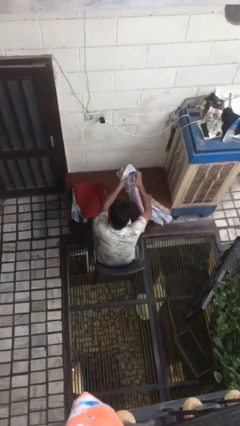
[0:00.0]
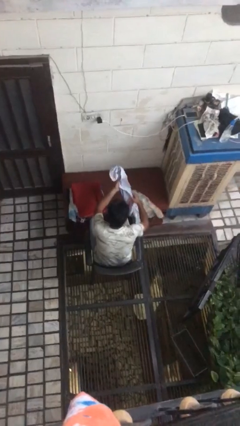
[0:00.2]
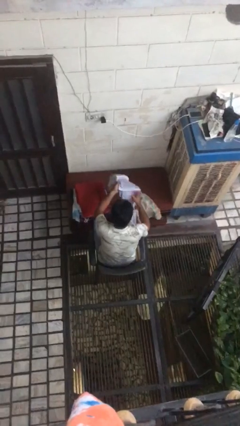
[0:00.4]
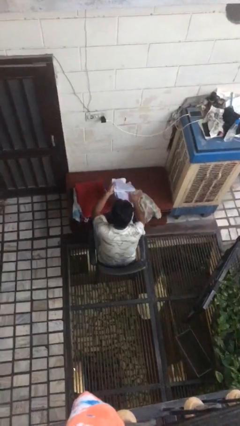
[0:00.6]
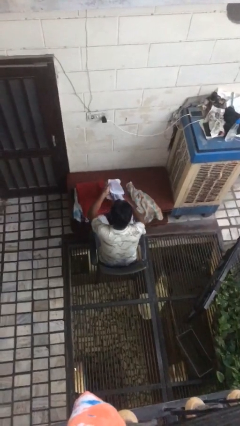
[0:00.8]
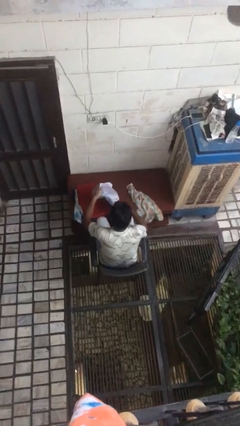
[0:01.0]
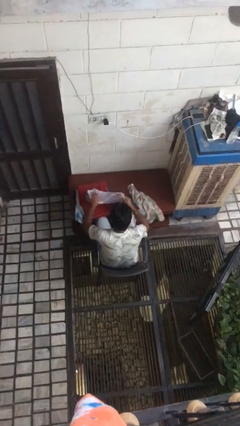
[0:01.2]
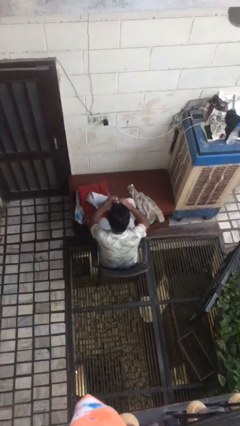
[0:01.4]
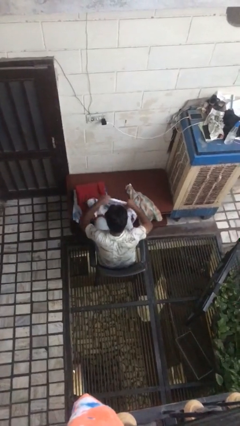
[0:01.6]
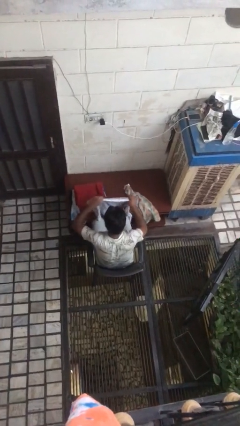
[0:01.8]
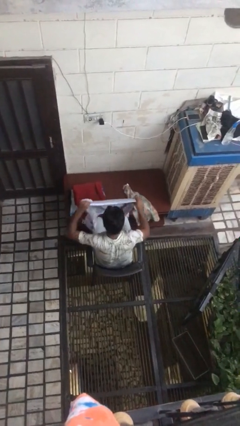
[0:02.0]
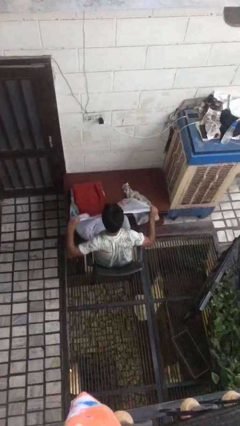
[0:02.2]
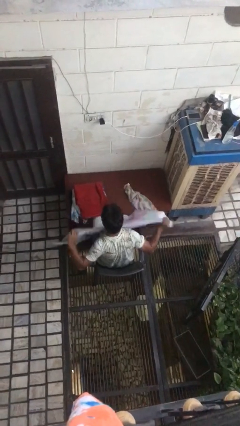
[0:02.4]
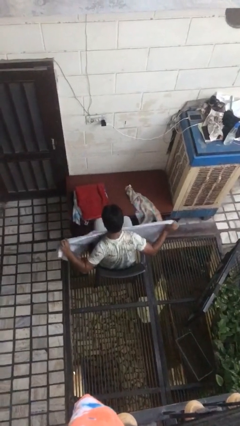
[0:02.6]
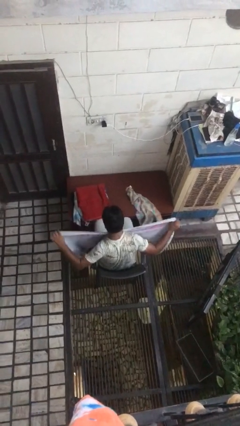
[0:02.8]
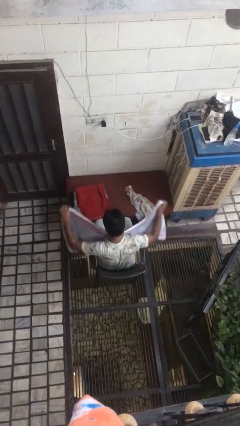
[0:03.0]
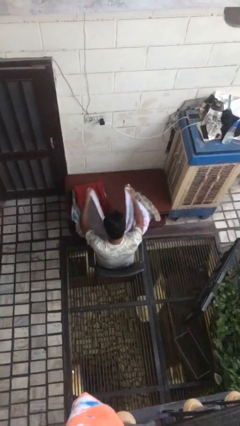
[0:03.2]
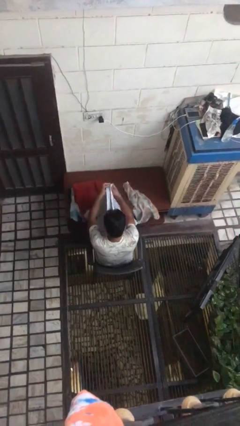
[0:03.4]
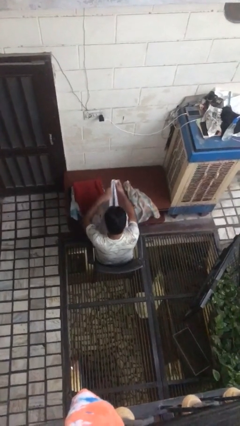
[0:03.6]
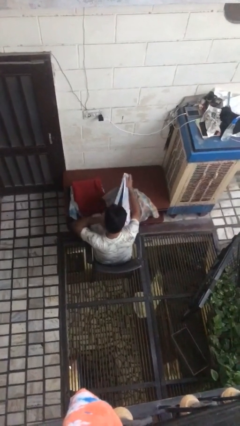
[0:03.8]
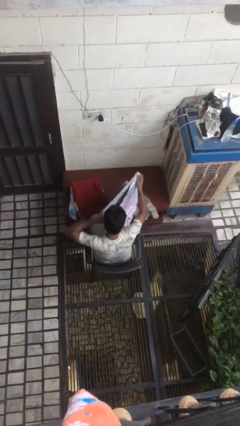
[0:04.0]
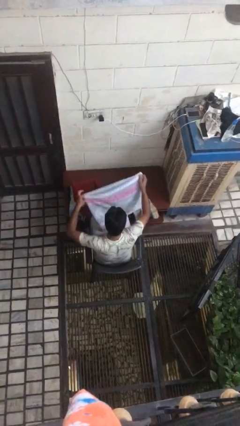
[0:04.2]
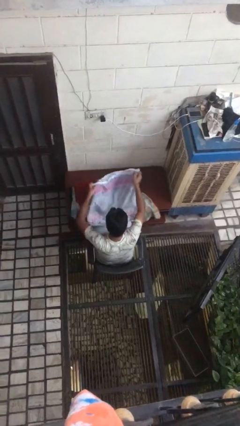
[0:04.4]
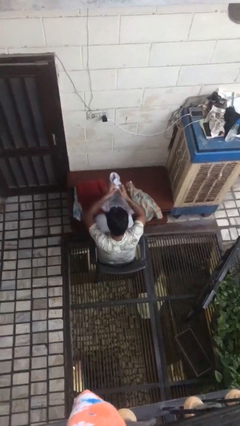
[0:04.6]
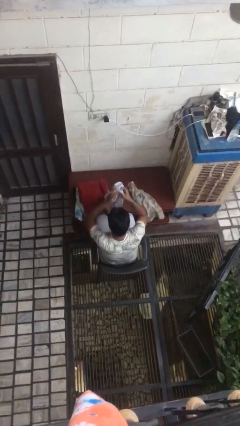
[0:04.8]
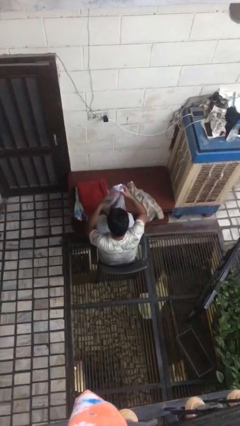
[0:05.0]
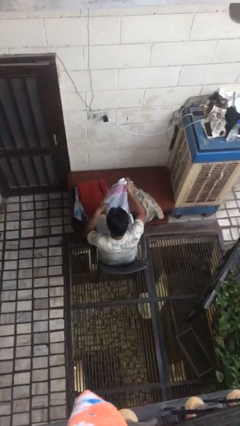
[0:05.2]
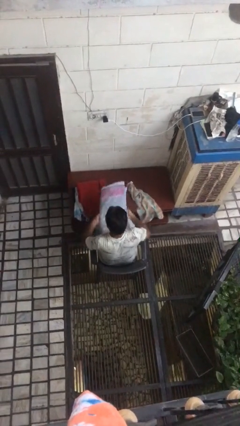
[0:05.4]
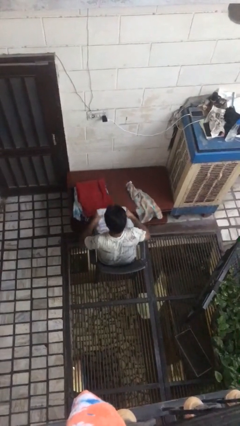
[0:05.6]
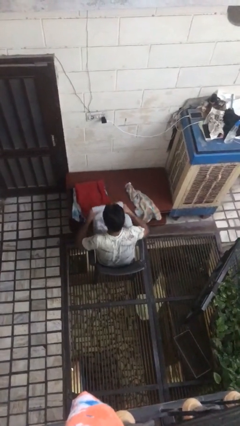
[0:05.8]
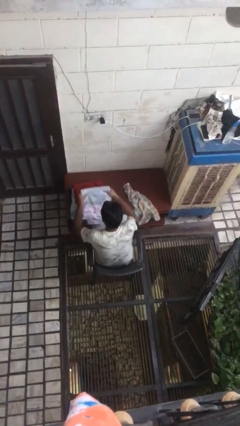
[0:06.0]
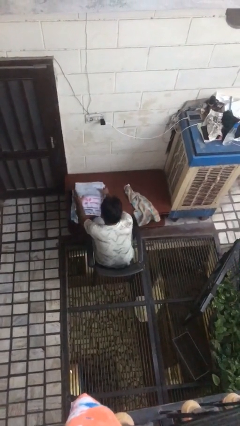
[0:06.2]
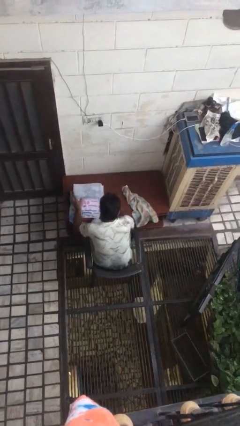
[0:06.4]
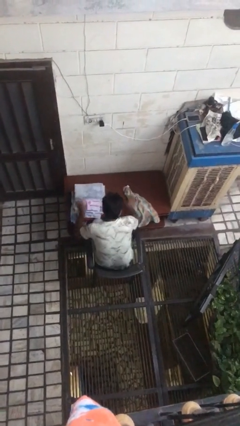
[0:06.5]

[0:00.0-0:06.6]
person folds towel

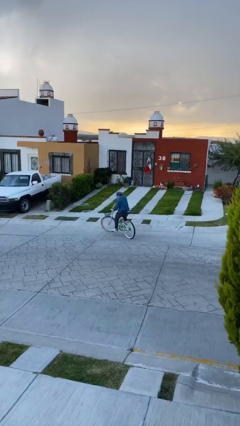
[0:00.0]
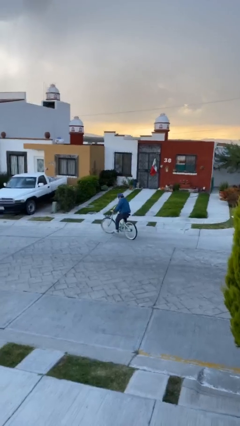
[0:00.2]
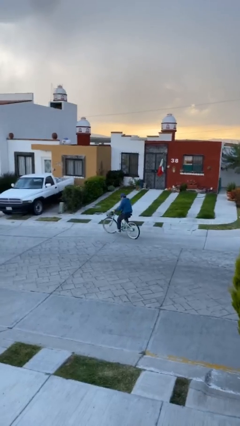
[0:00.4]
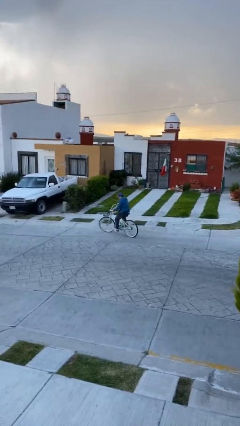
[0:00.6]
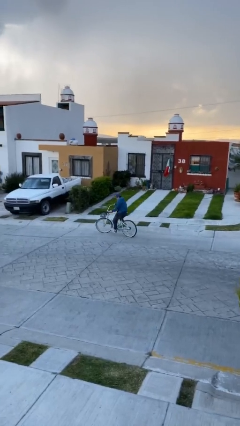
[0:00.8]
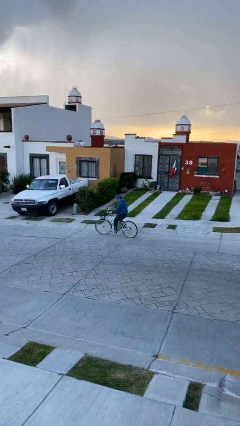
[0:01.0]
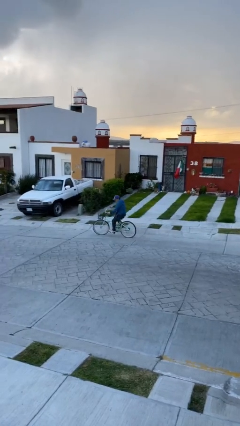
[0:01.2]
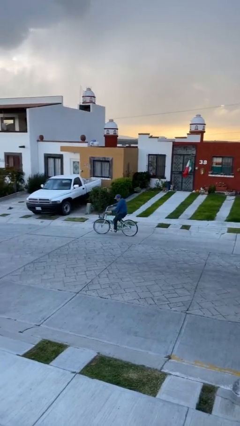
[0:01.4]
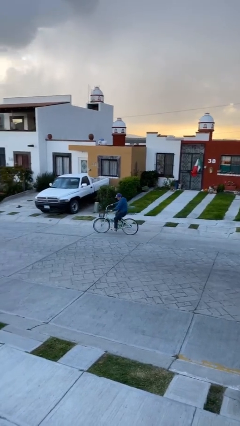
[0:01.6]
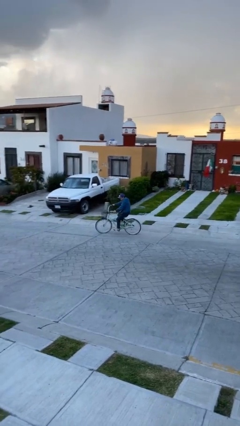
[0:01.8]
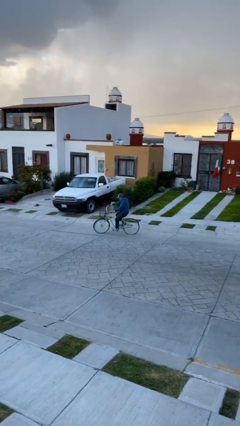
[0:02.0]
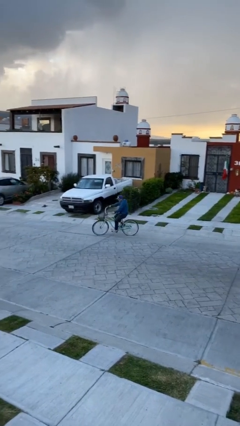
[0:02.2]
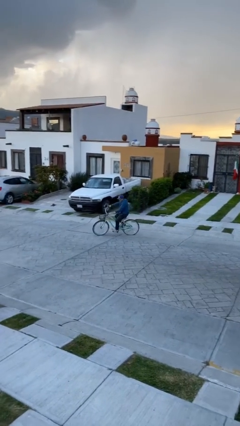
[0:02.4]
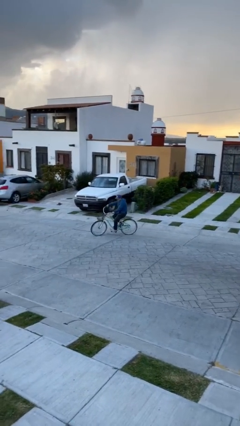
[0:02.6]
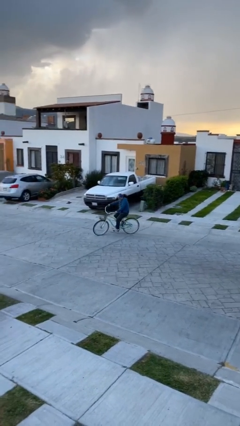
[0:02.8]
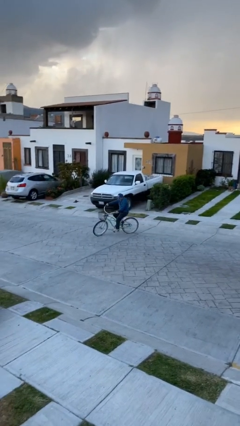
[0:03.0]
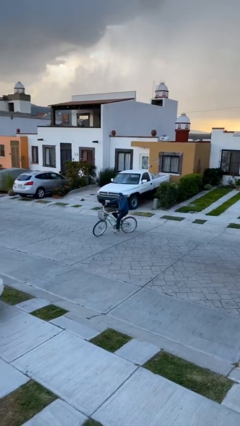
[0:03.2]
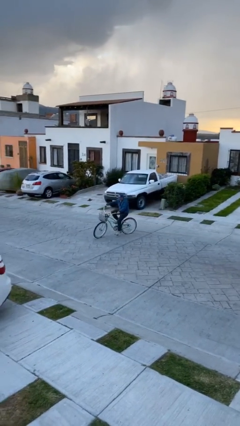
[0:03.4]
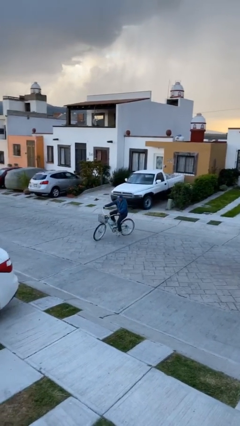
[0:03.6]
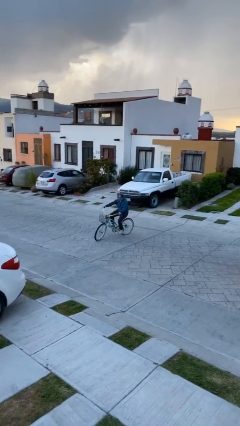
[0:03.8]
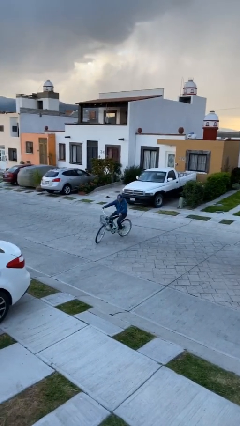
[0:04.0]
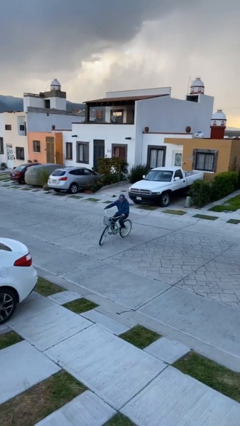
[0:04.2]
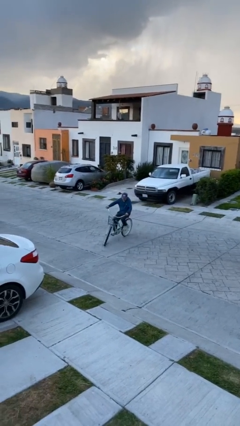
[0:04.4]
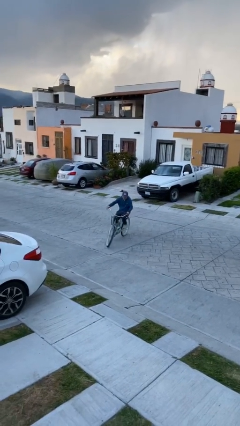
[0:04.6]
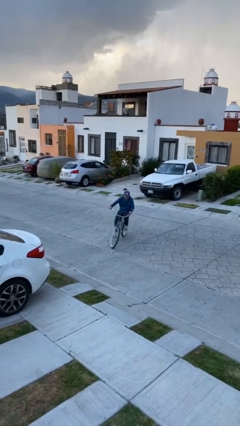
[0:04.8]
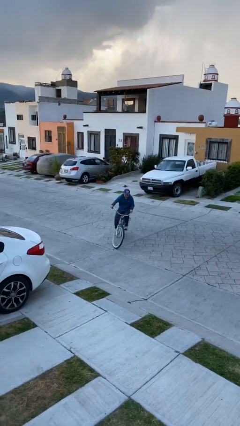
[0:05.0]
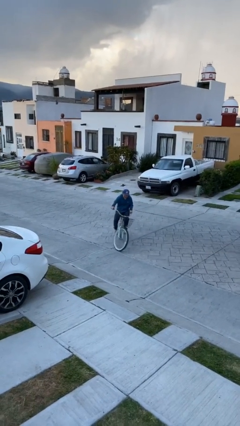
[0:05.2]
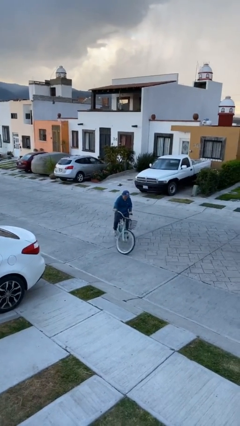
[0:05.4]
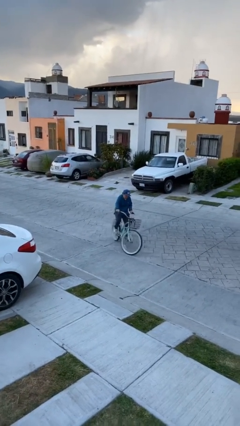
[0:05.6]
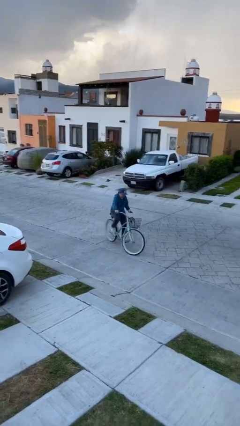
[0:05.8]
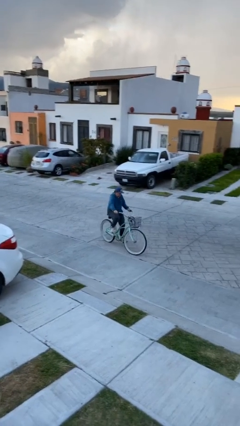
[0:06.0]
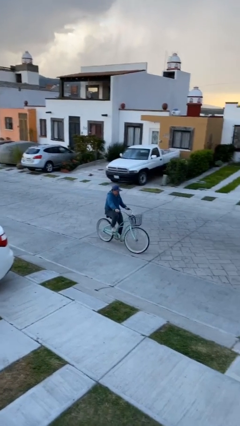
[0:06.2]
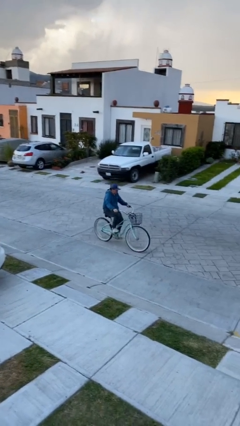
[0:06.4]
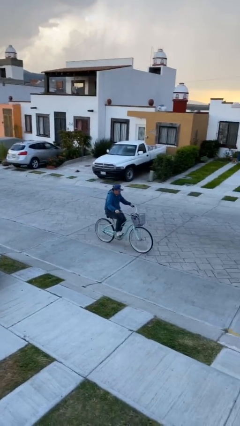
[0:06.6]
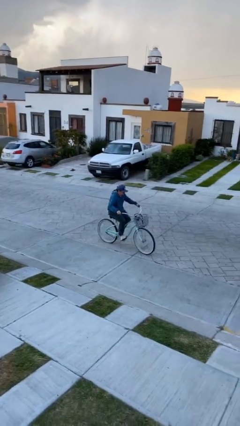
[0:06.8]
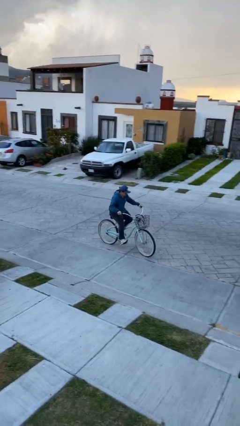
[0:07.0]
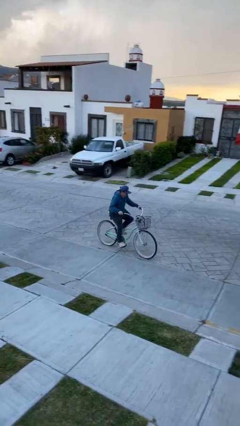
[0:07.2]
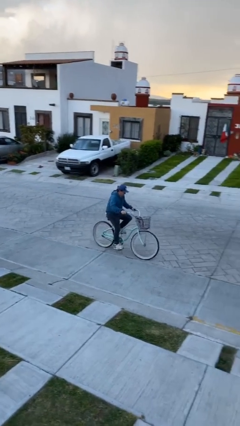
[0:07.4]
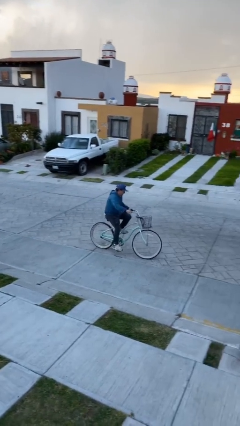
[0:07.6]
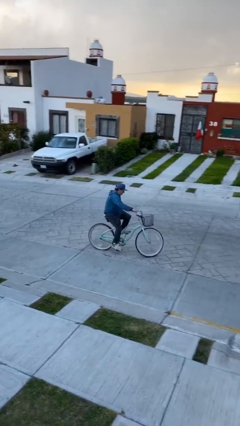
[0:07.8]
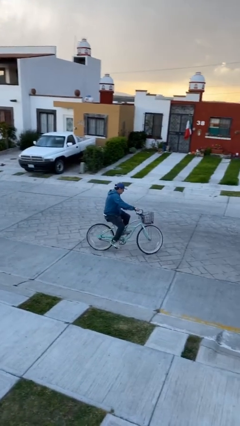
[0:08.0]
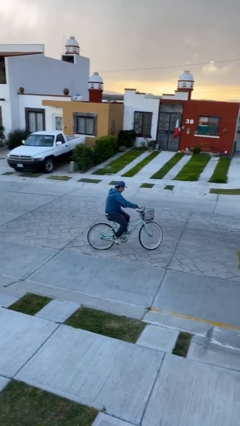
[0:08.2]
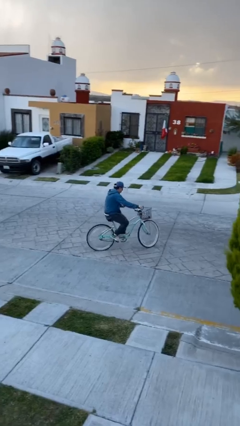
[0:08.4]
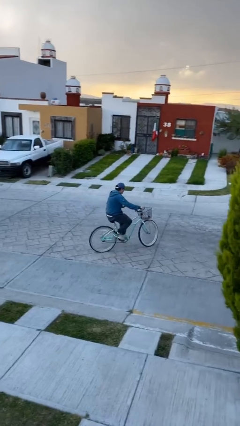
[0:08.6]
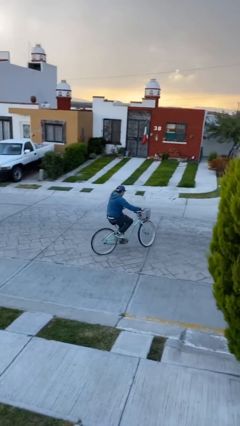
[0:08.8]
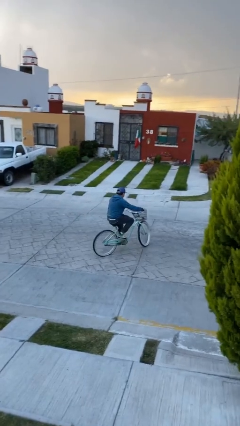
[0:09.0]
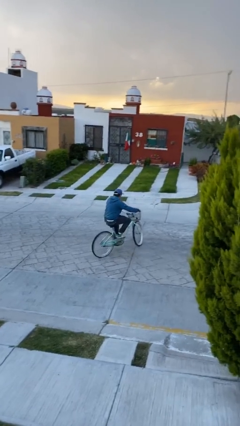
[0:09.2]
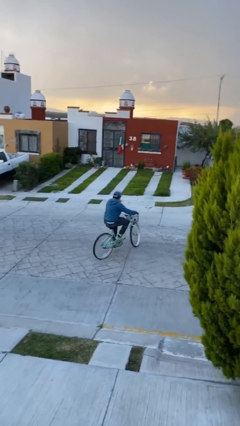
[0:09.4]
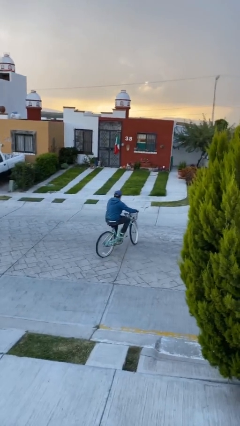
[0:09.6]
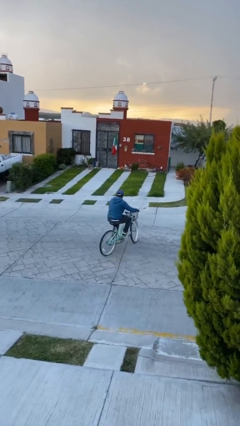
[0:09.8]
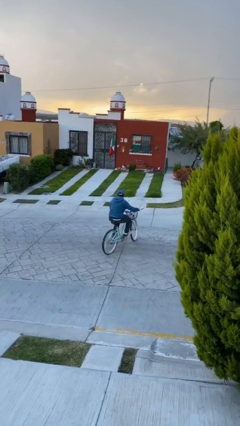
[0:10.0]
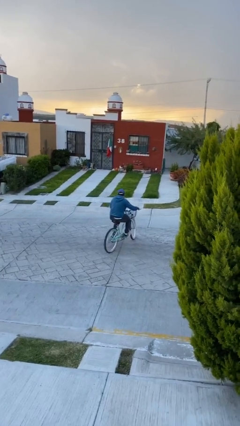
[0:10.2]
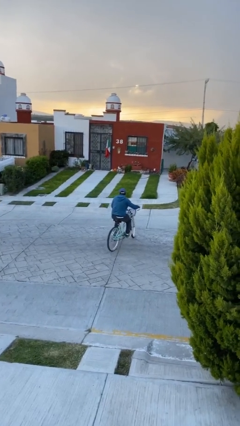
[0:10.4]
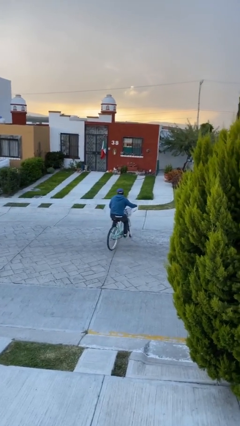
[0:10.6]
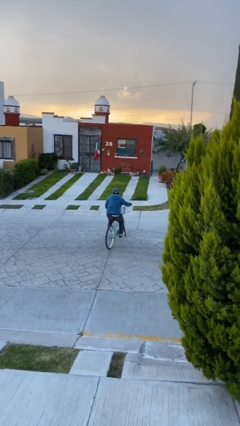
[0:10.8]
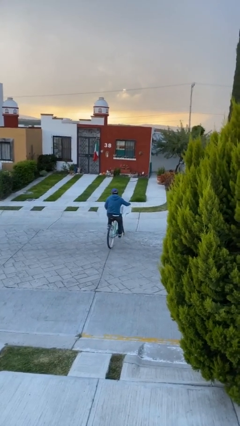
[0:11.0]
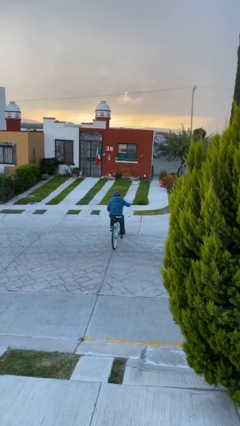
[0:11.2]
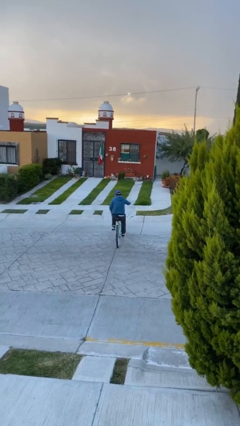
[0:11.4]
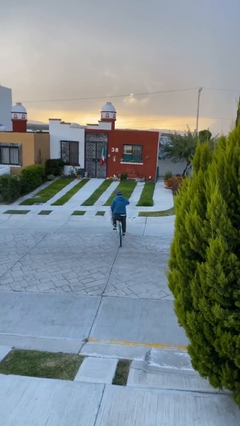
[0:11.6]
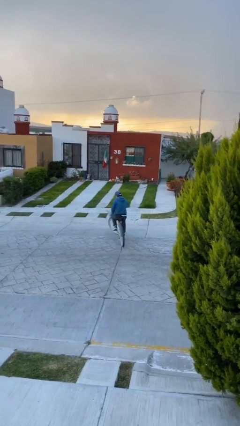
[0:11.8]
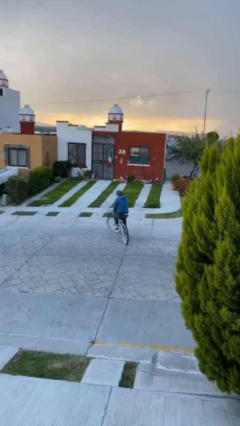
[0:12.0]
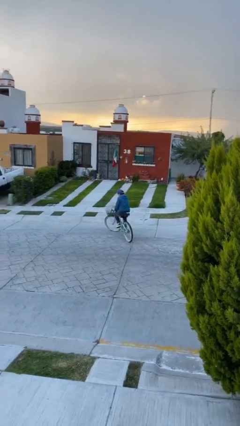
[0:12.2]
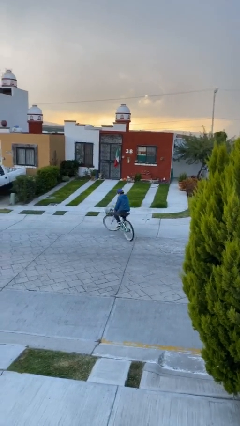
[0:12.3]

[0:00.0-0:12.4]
person rides bicycle
